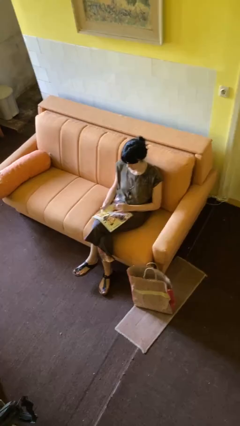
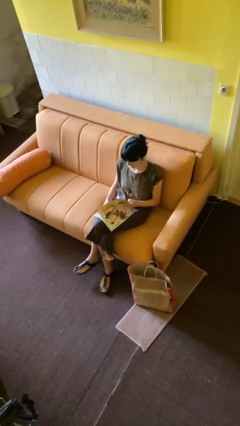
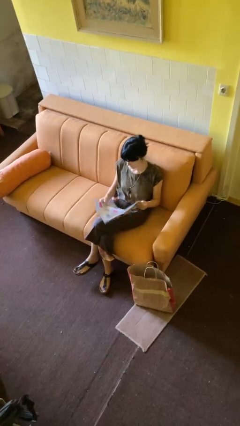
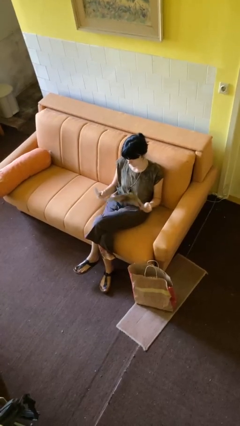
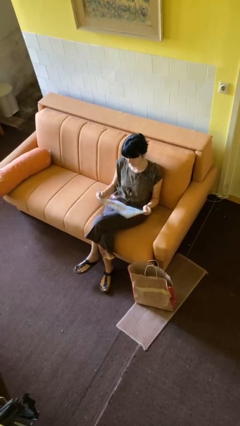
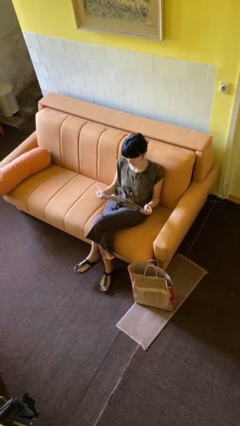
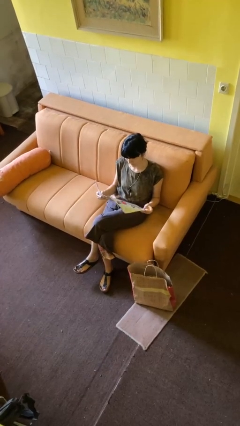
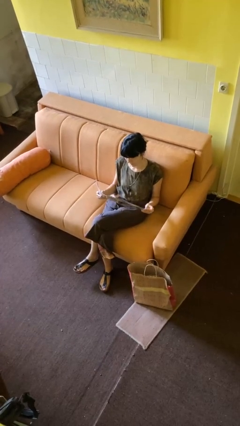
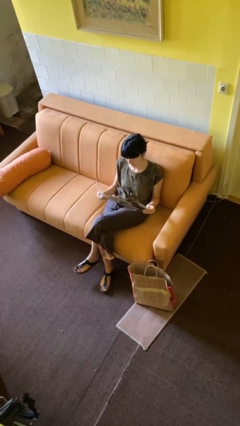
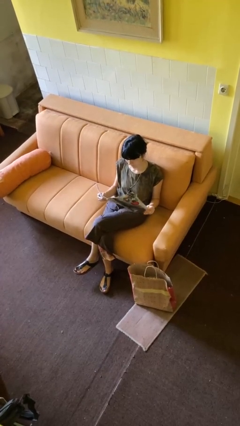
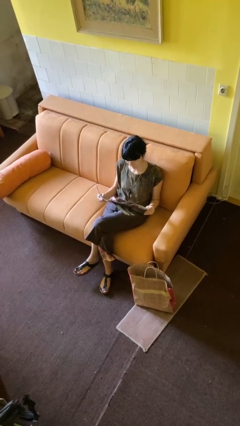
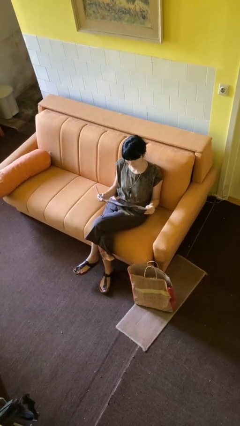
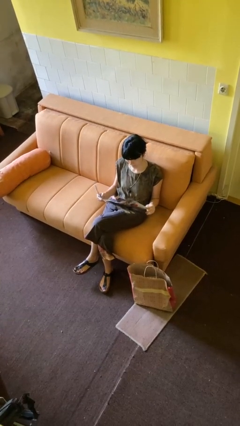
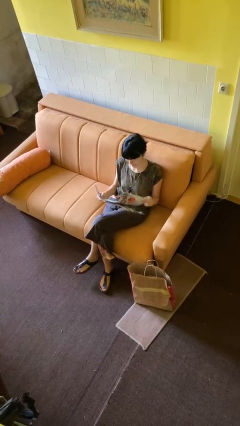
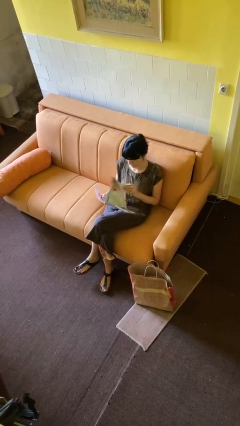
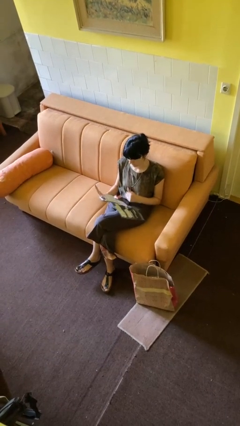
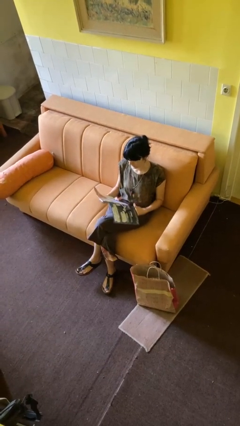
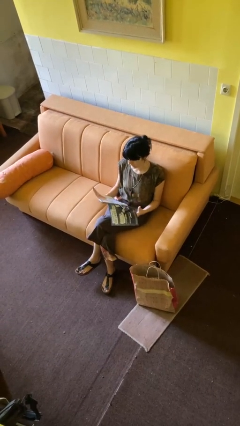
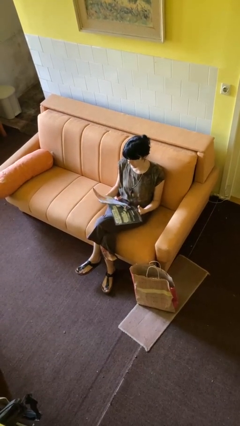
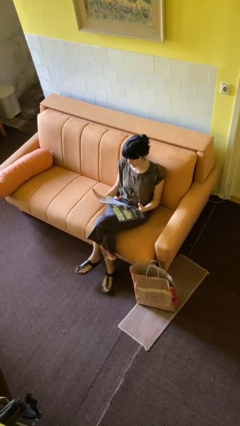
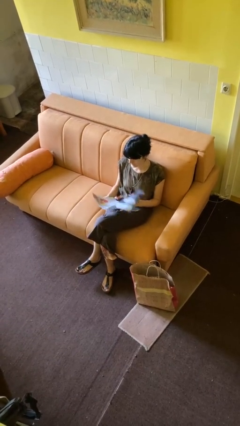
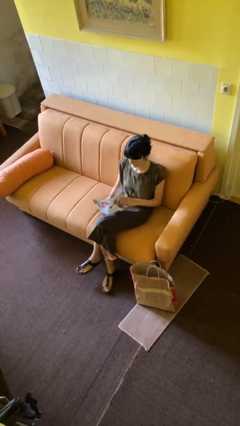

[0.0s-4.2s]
person reads magazine

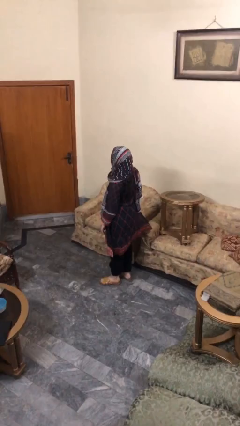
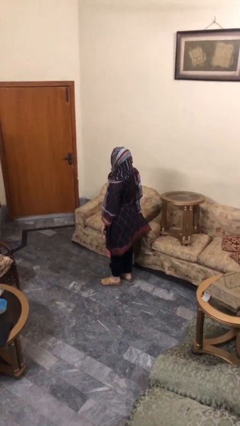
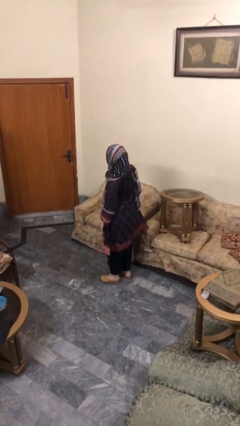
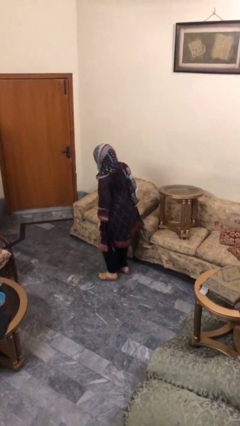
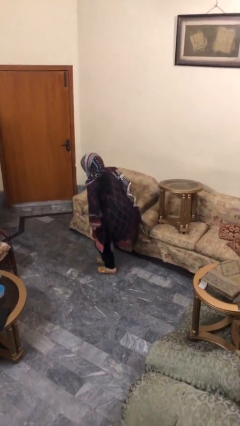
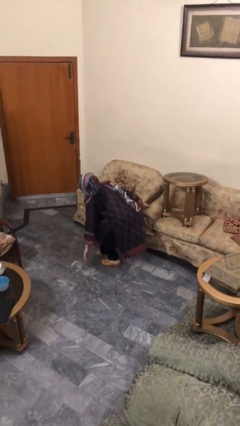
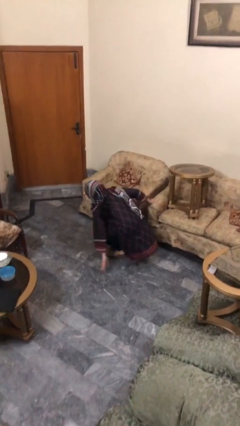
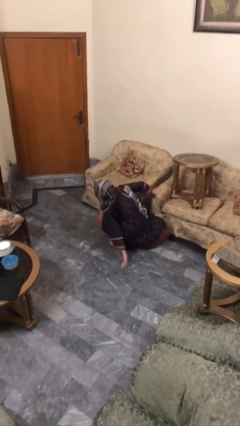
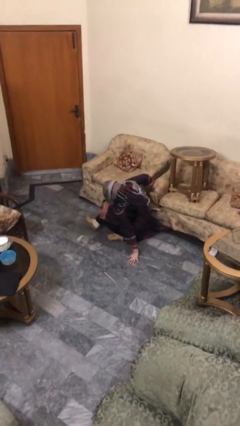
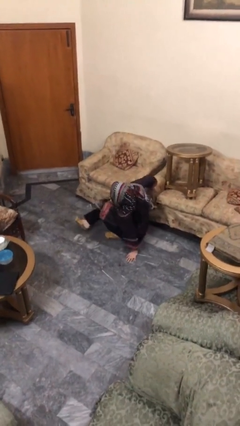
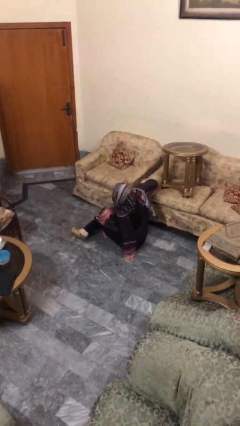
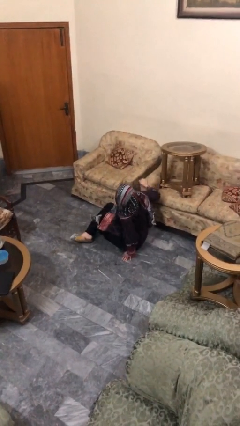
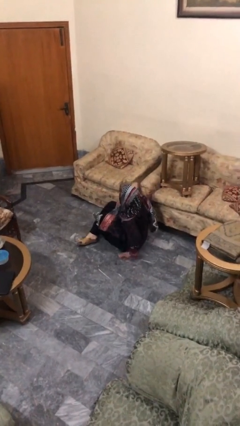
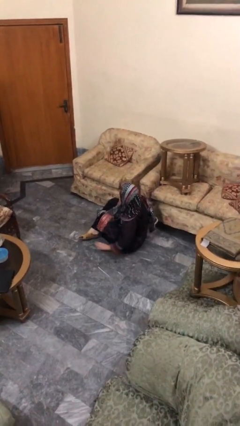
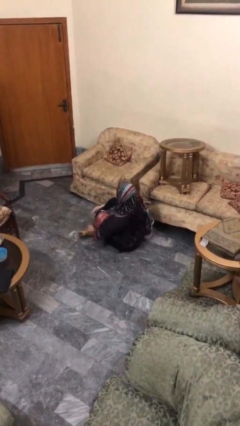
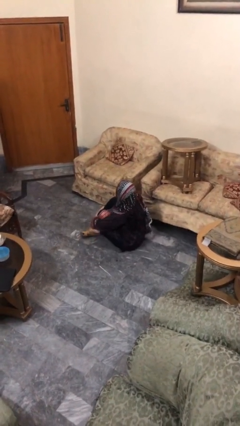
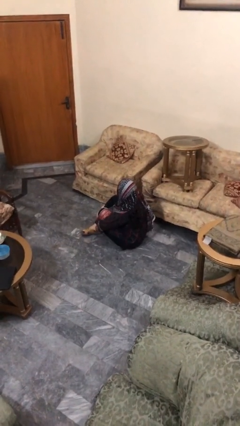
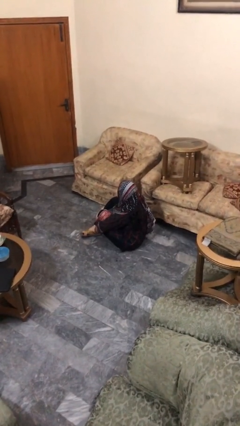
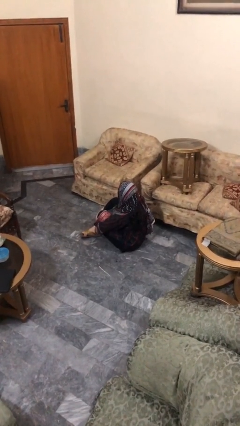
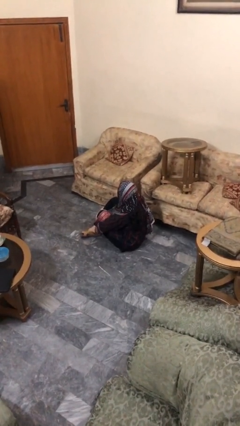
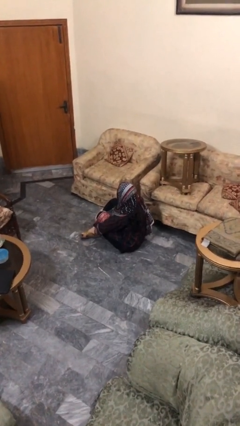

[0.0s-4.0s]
person sits crisscross

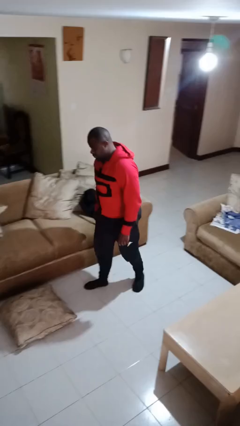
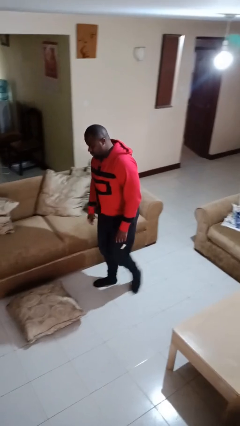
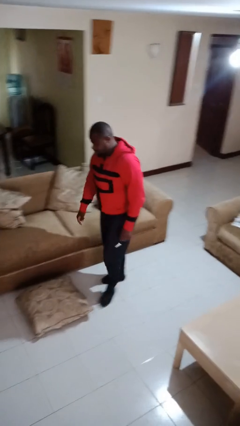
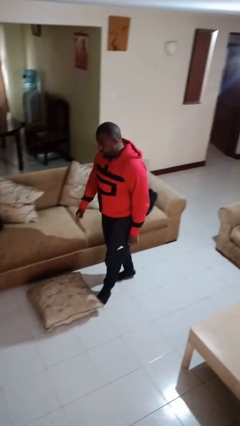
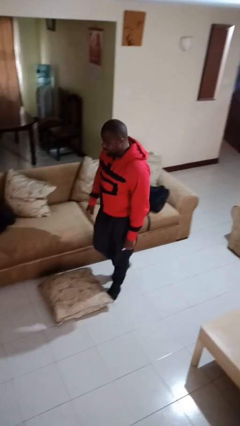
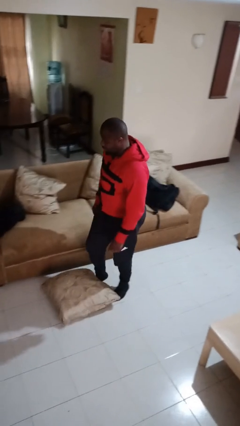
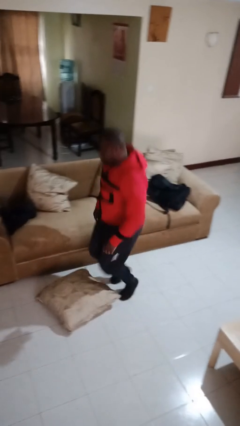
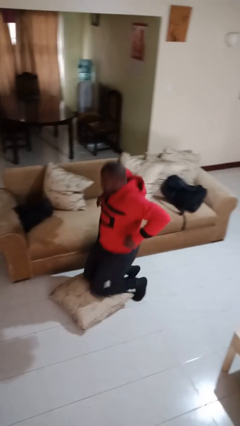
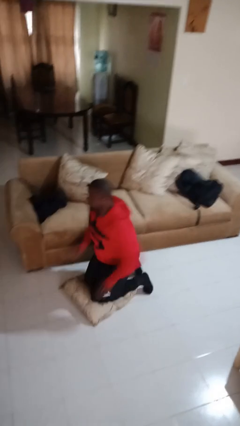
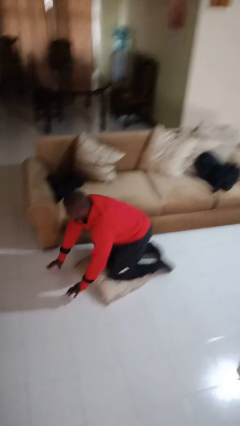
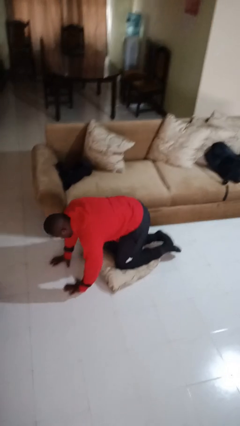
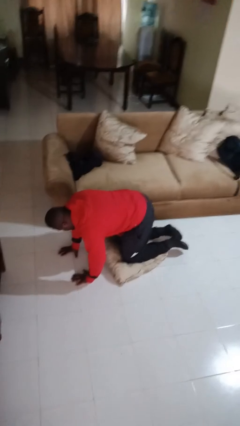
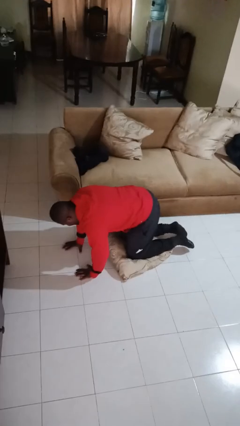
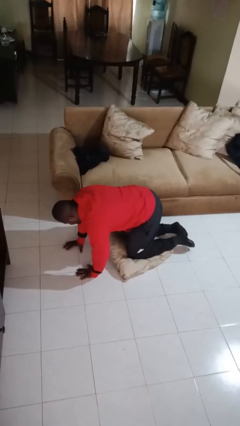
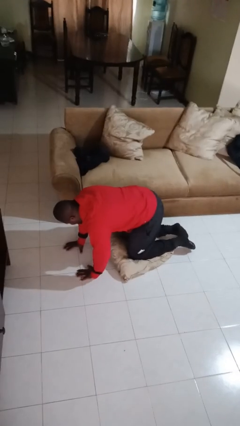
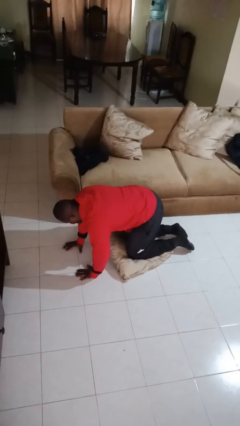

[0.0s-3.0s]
person trips on object on floor

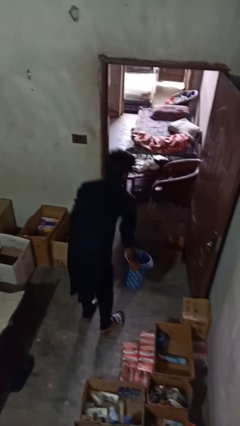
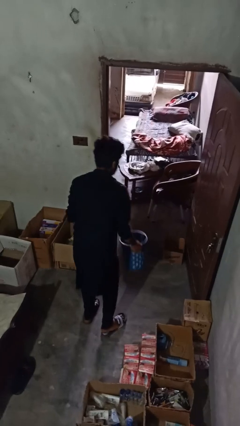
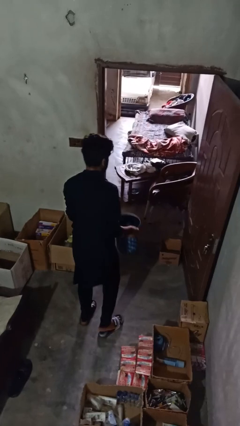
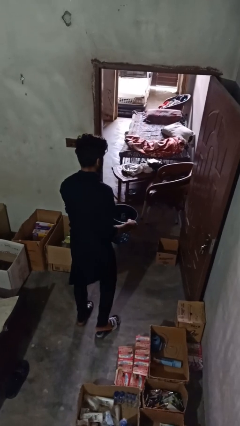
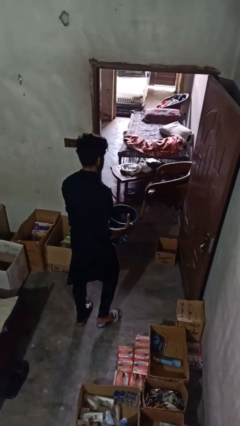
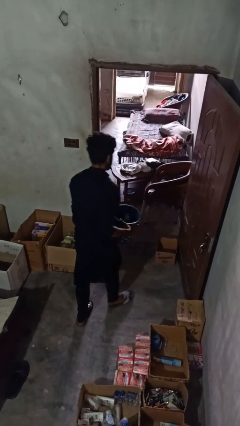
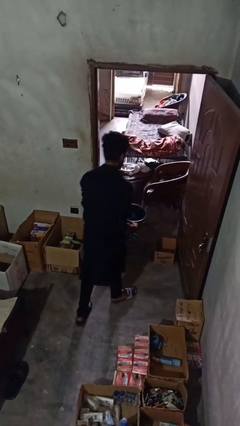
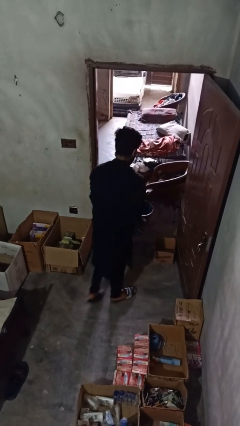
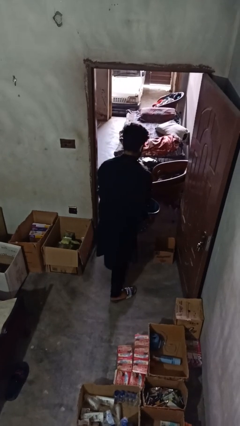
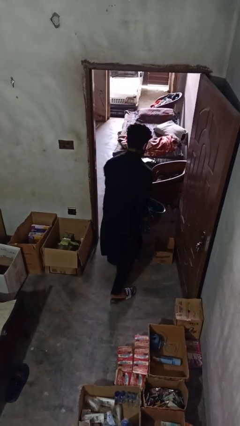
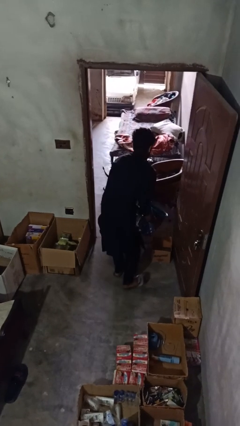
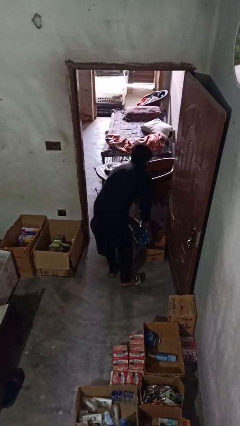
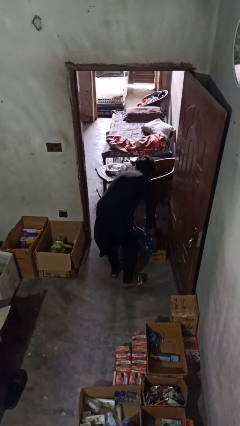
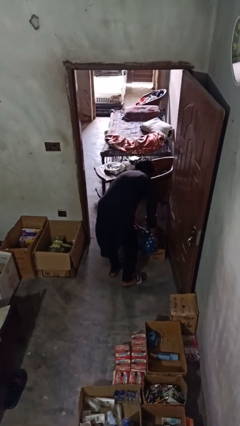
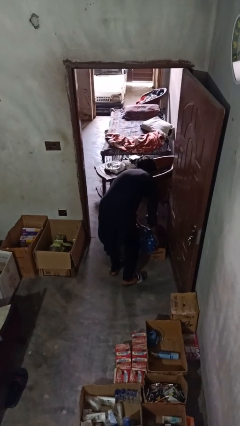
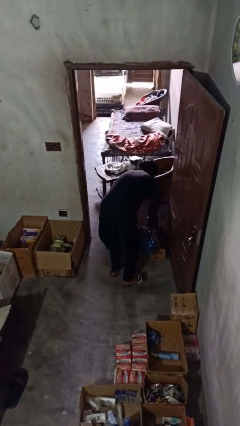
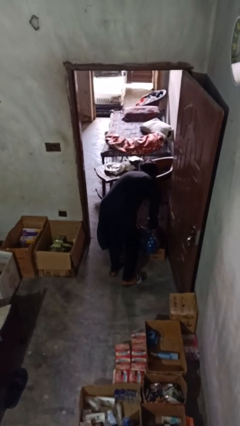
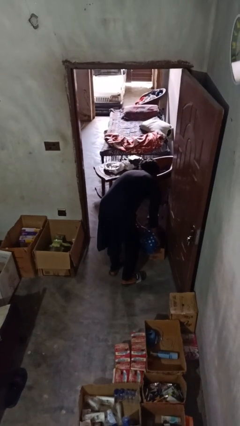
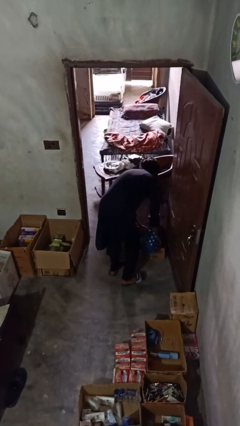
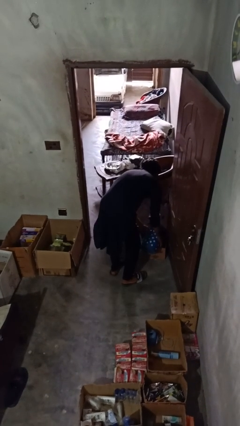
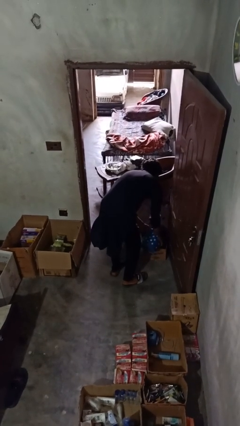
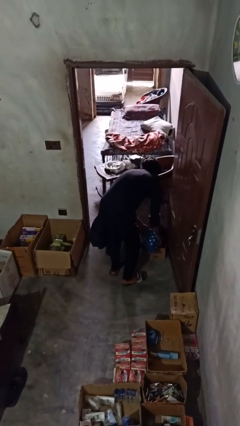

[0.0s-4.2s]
person removes trashbag from trashcan

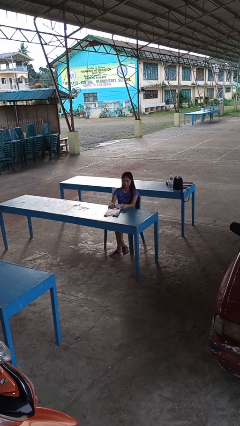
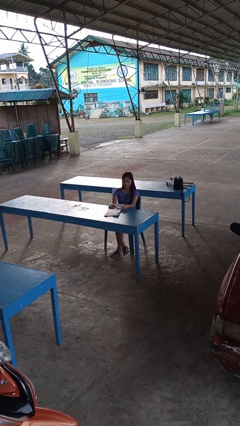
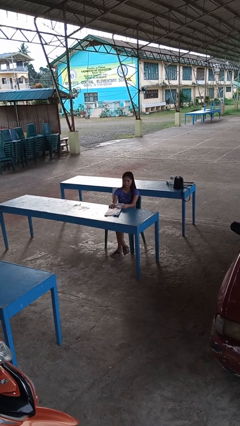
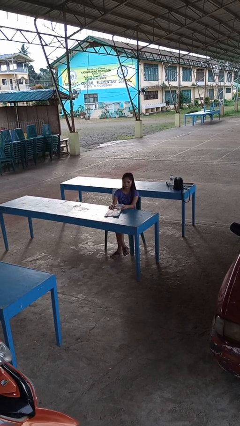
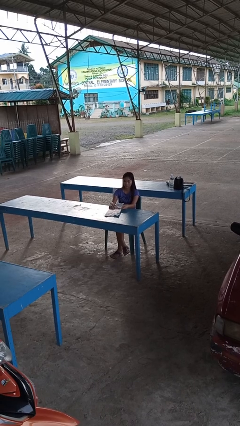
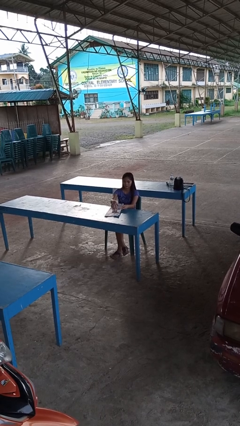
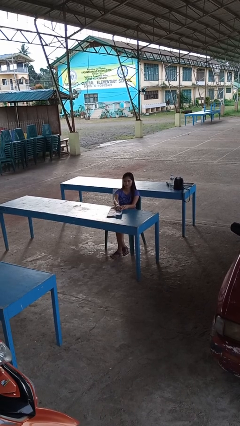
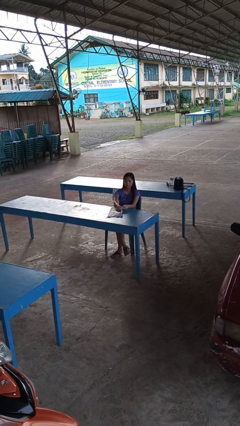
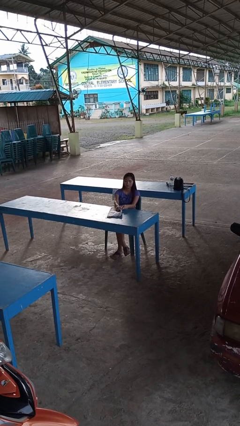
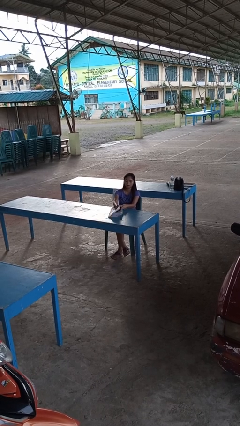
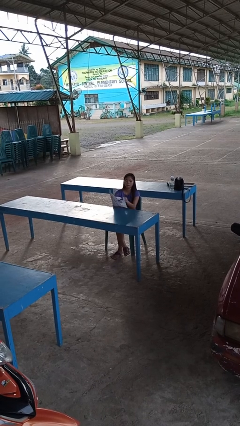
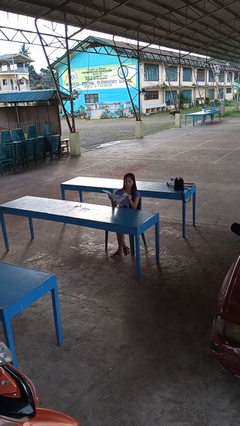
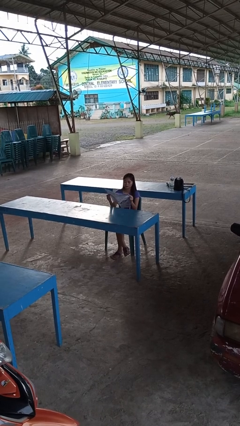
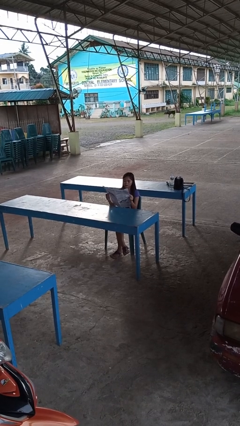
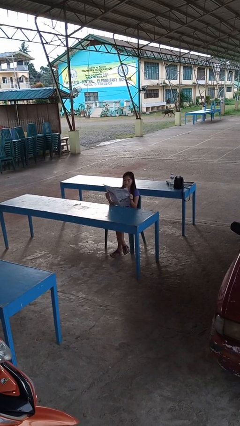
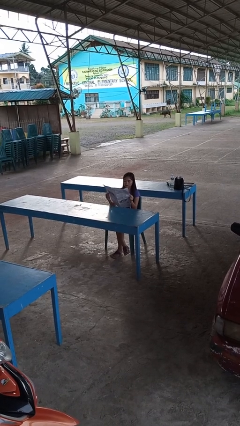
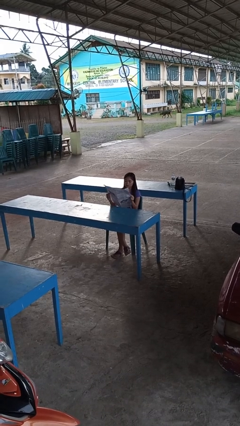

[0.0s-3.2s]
person reads newspaper
